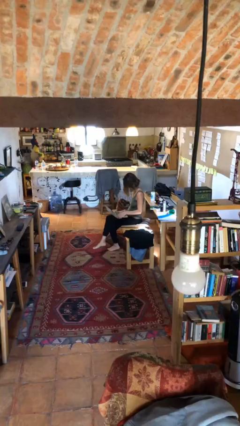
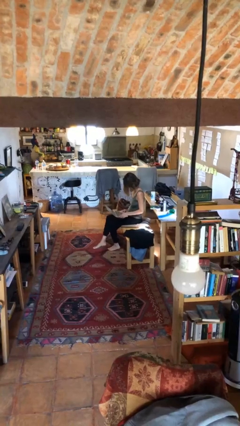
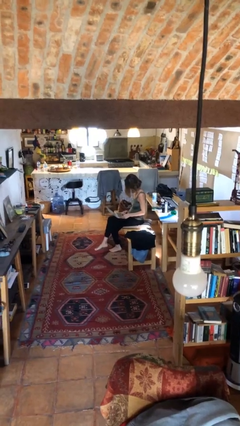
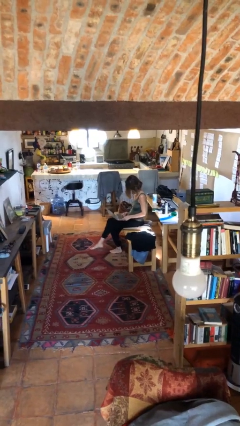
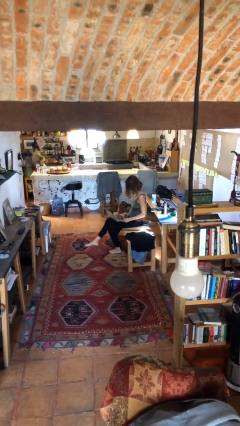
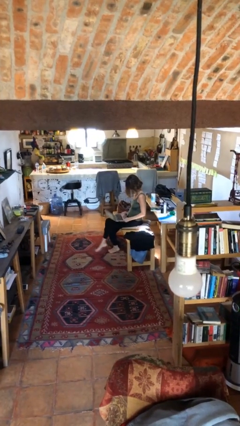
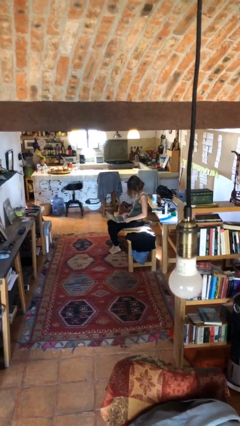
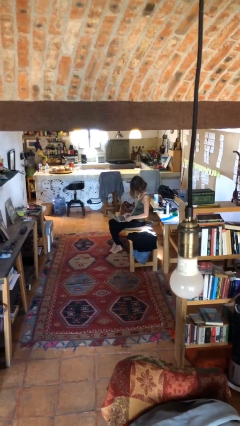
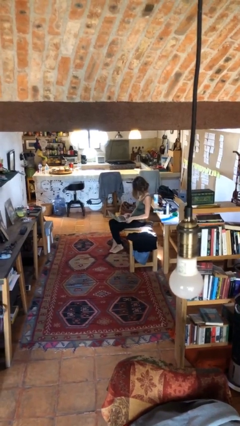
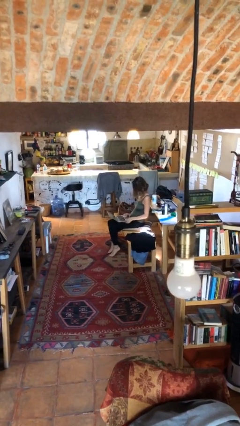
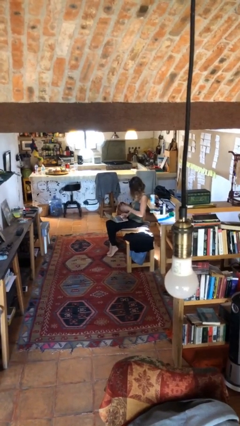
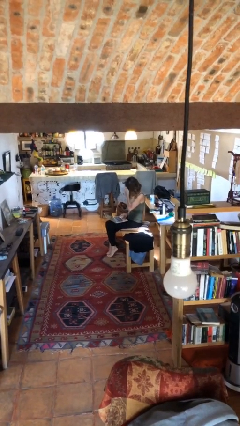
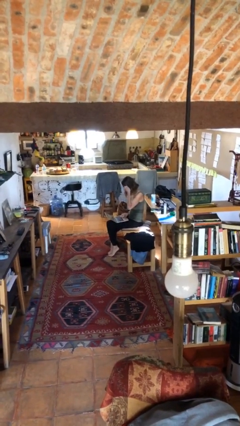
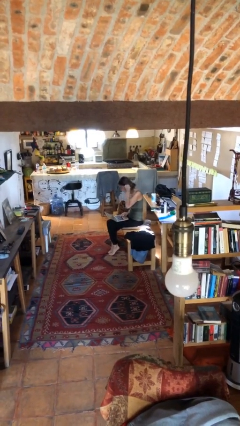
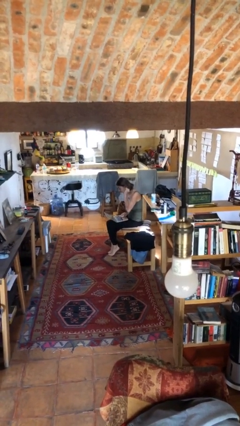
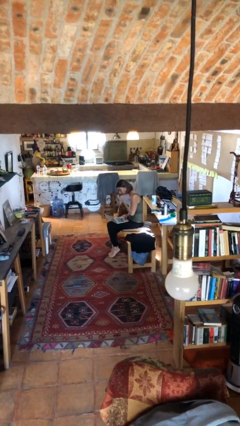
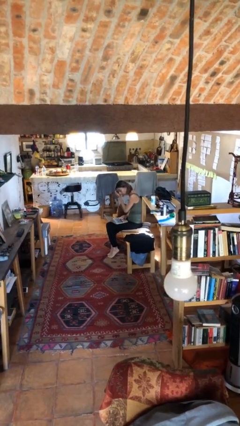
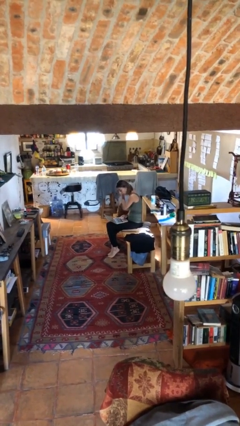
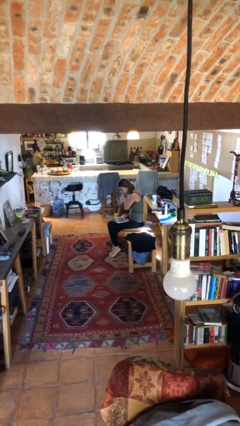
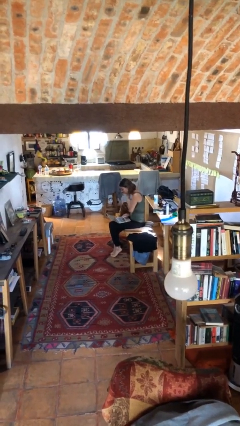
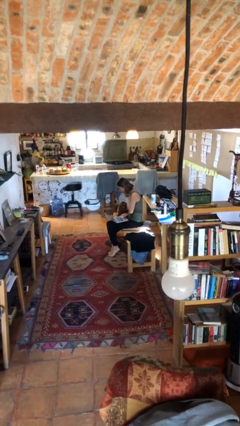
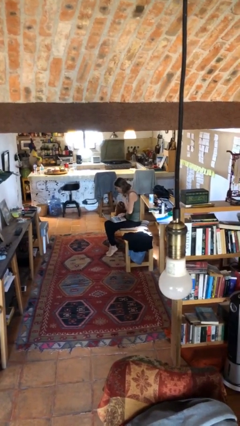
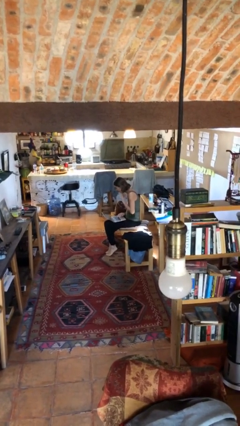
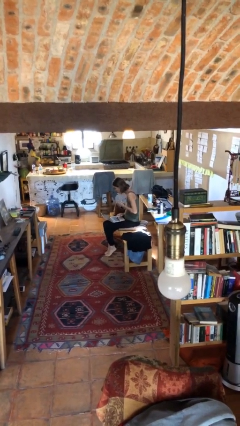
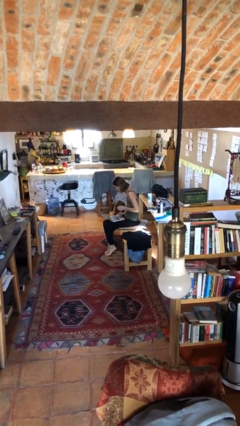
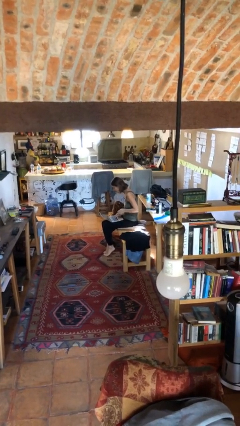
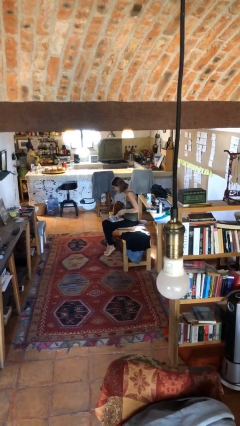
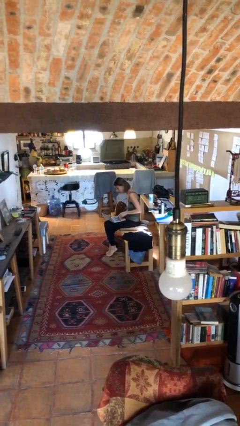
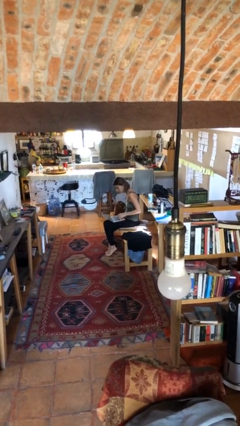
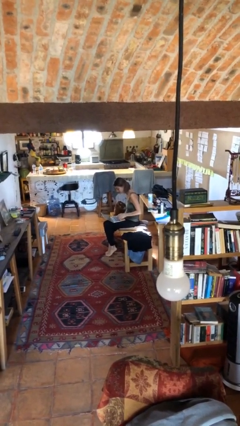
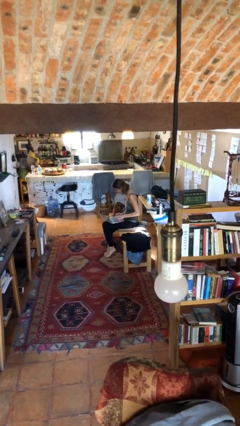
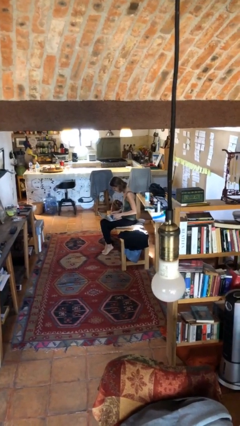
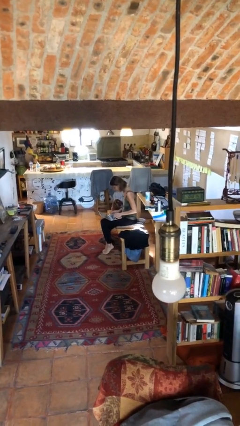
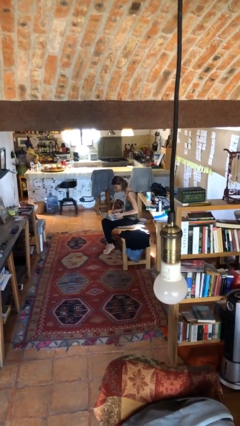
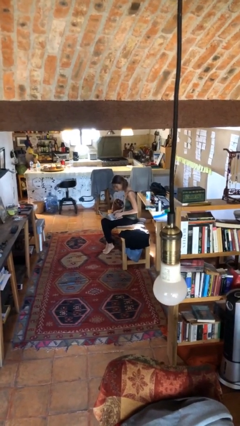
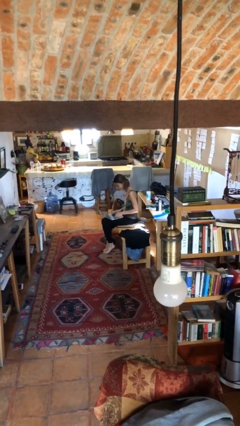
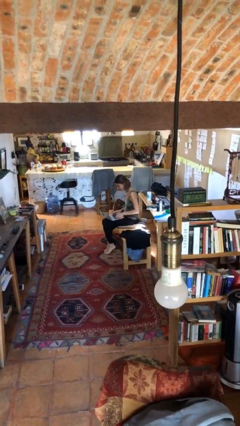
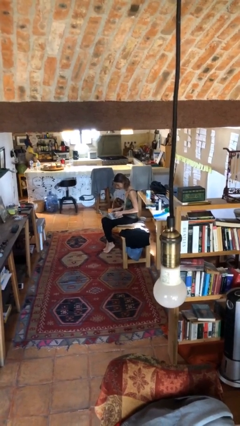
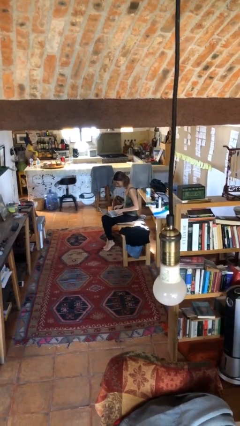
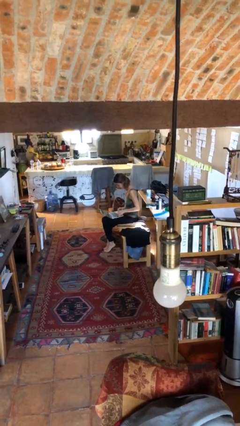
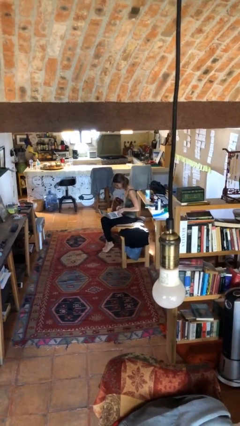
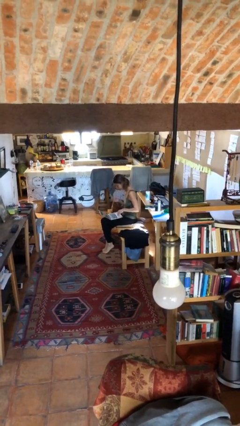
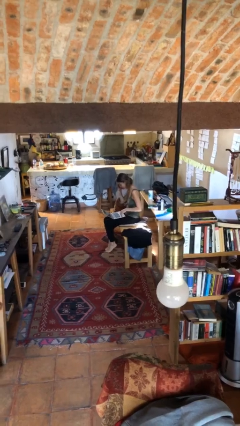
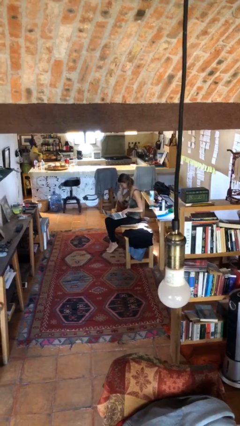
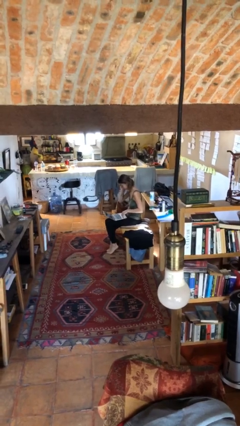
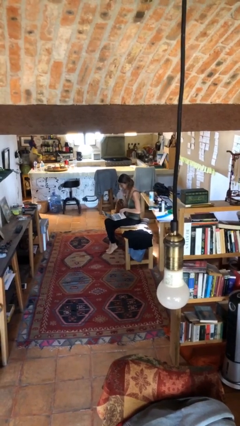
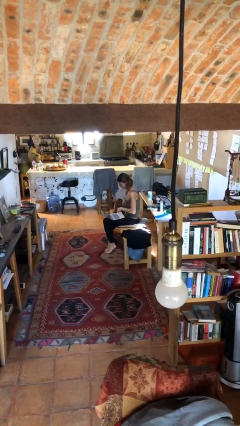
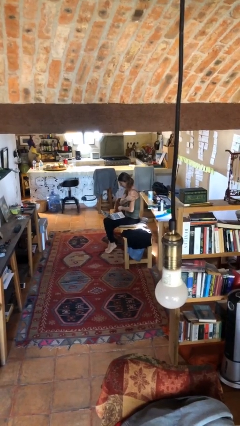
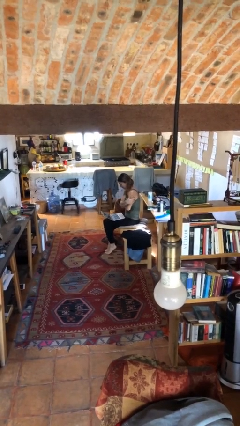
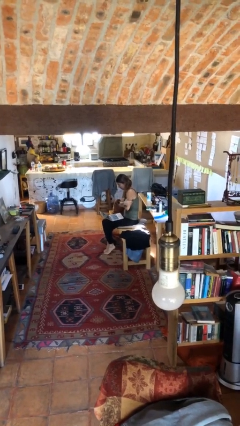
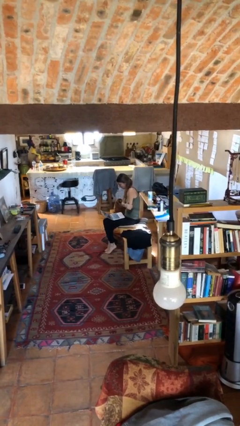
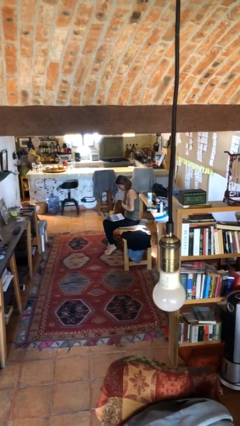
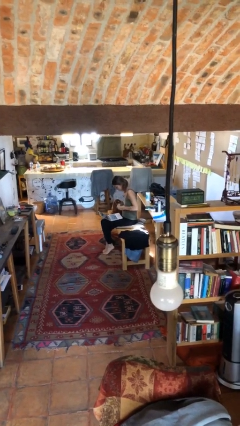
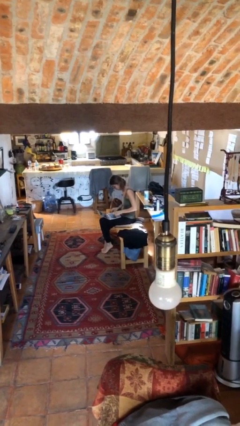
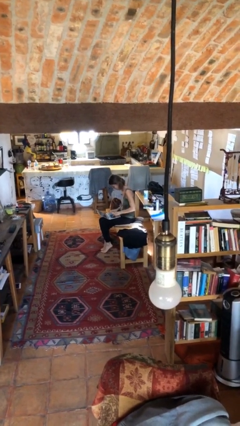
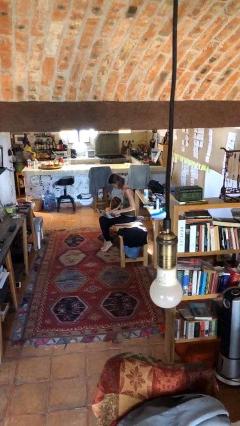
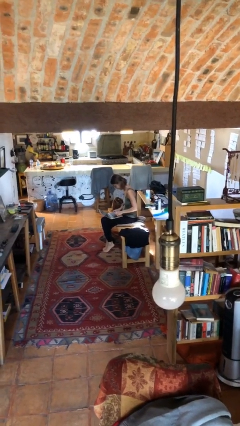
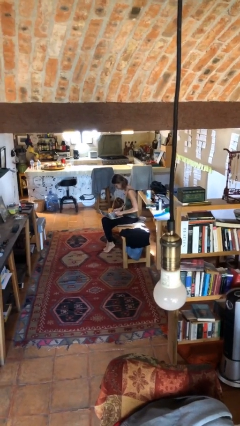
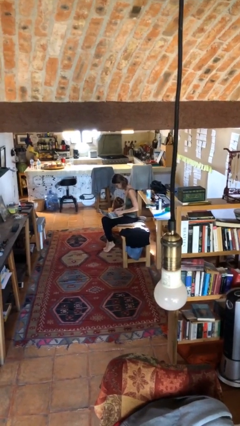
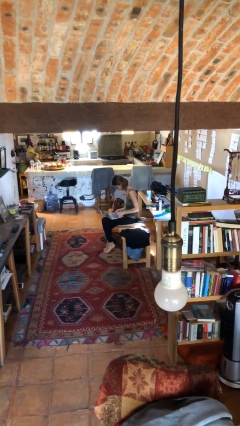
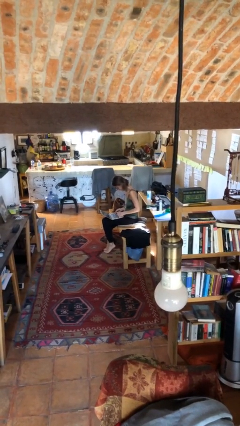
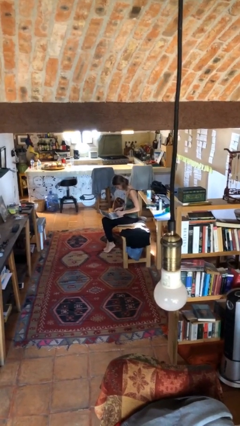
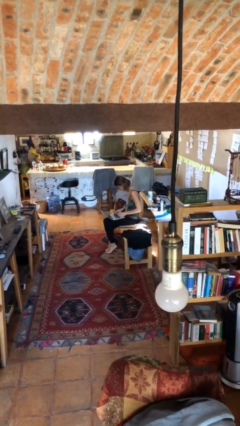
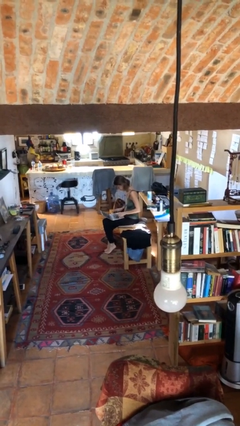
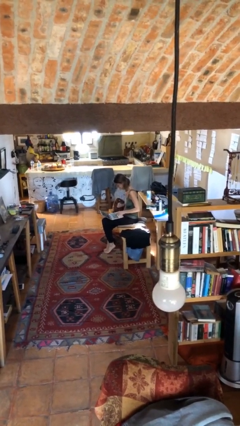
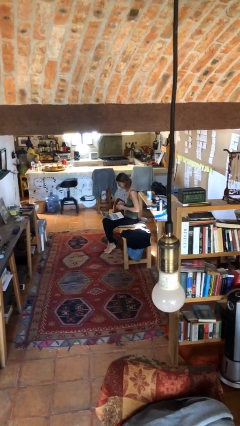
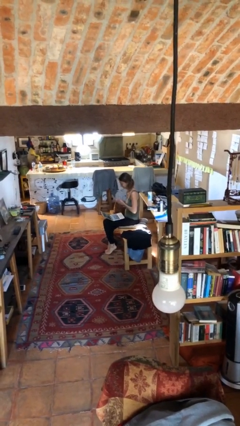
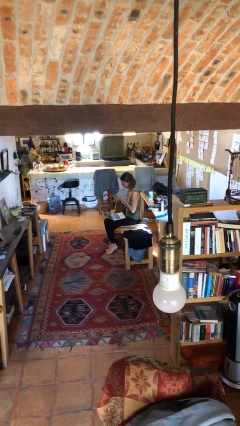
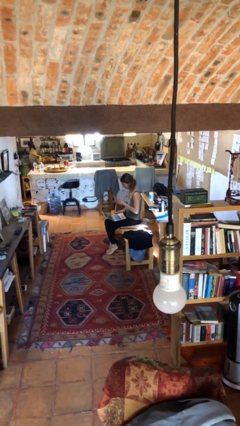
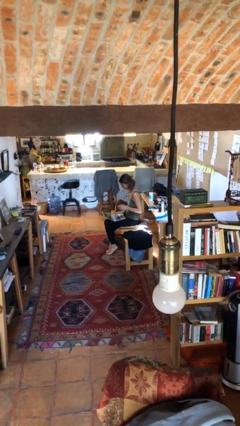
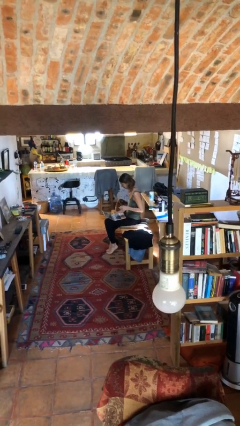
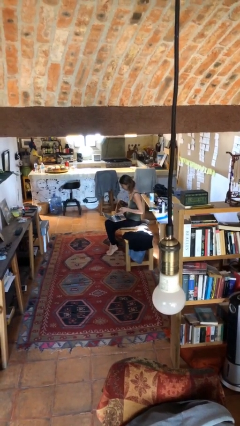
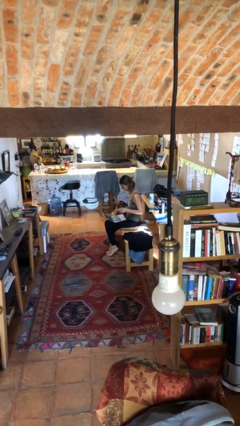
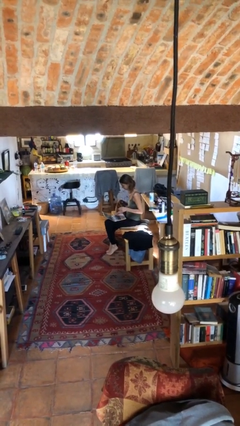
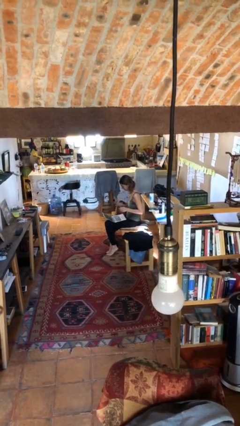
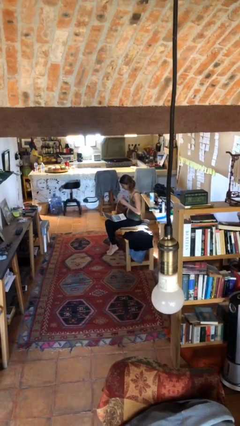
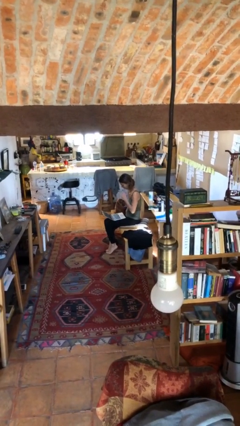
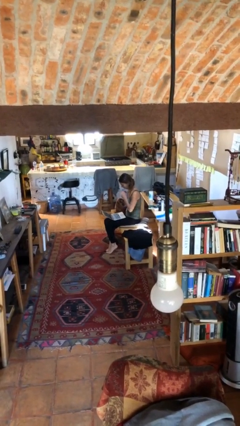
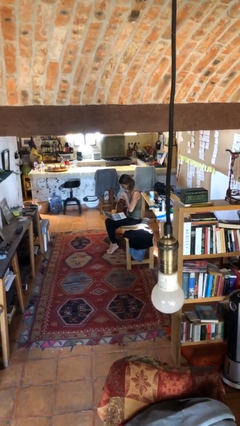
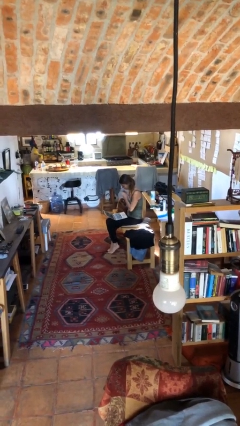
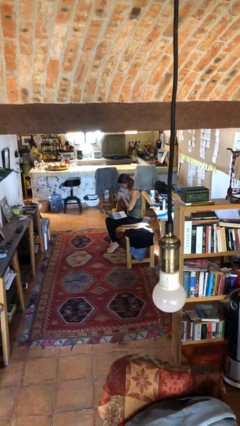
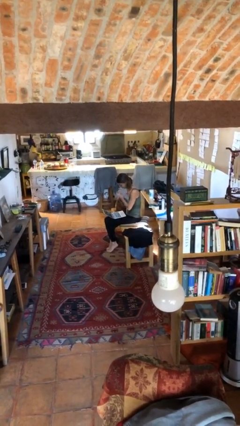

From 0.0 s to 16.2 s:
person interacts with laptop

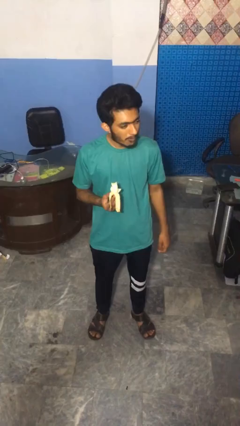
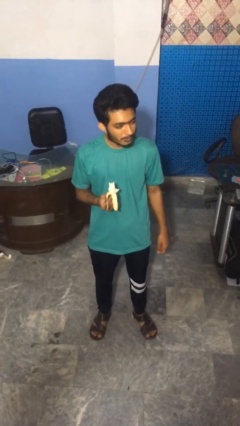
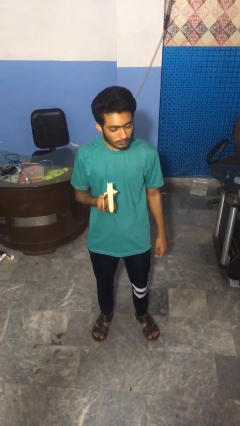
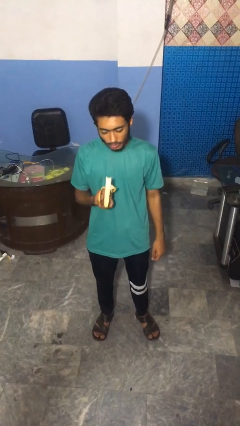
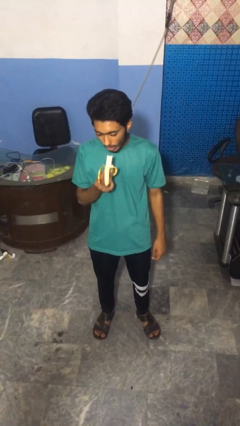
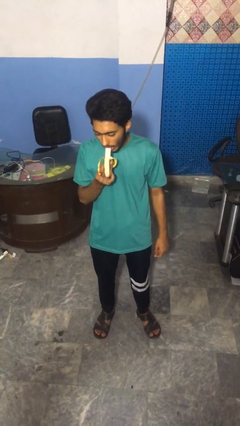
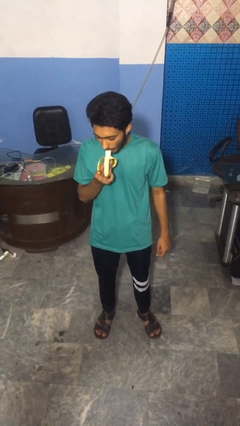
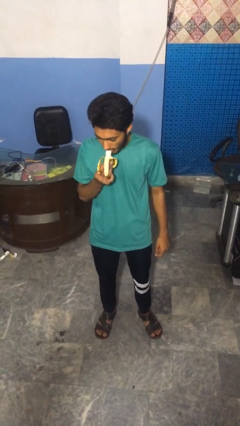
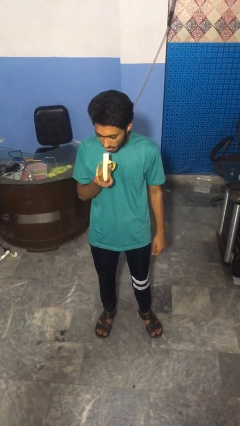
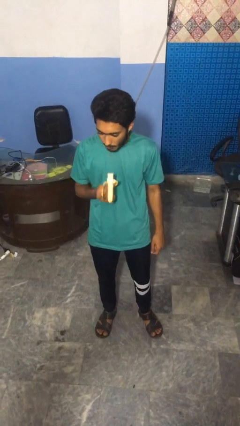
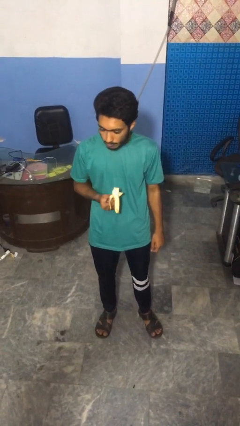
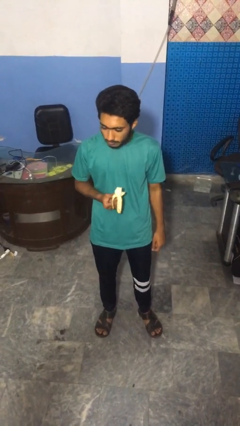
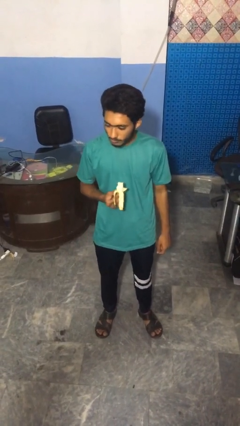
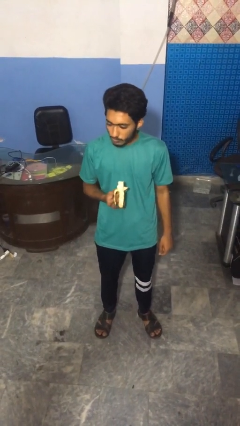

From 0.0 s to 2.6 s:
person eats banana
